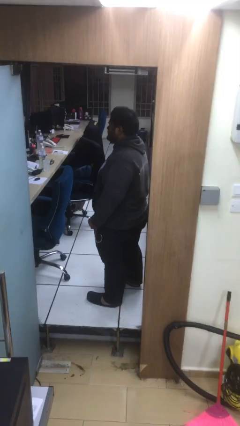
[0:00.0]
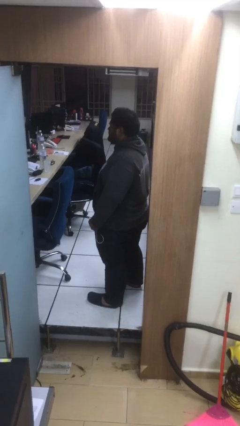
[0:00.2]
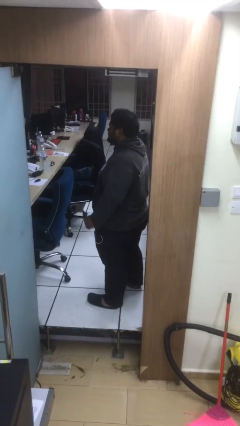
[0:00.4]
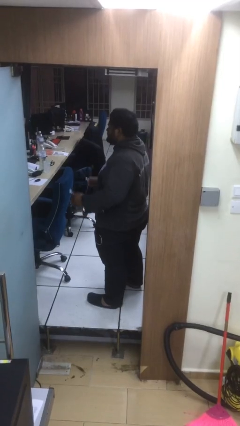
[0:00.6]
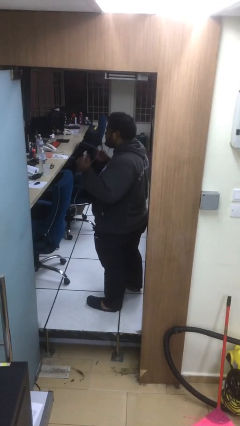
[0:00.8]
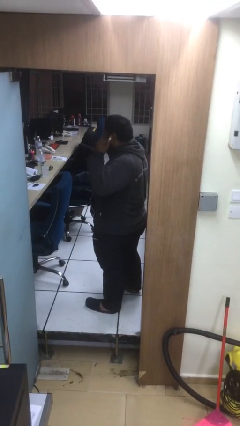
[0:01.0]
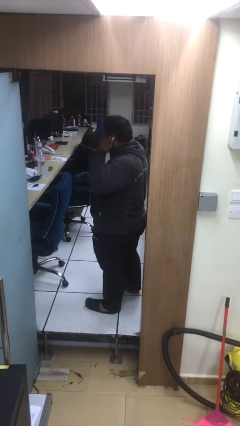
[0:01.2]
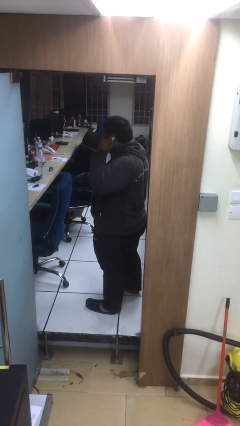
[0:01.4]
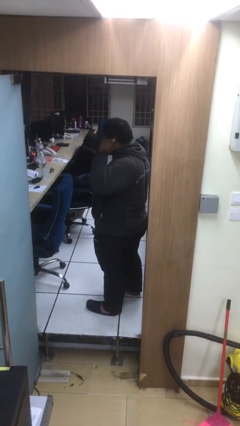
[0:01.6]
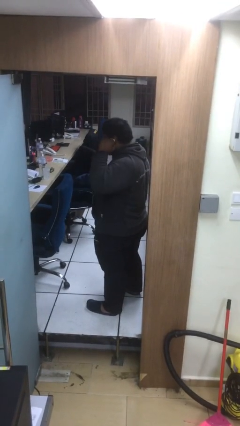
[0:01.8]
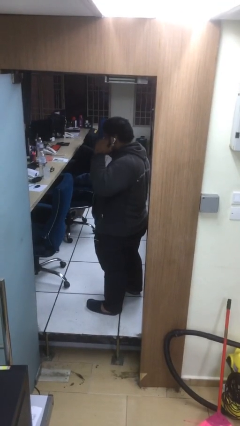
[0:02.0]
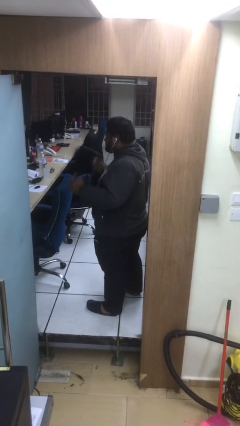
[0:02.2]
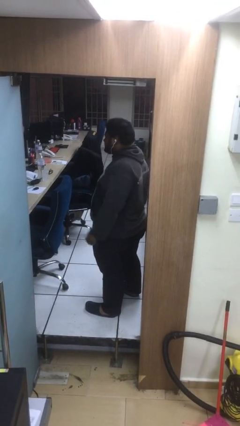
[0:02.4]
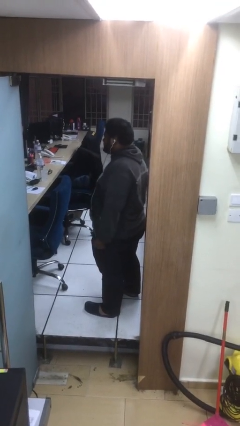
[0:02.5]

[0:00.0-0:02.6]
person puts on headphones

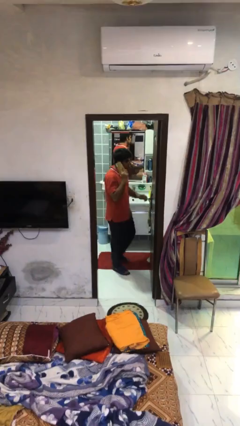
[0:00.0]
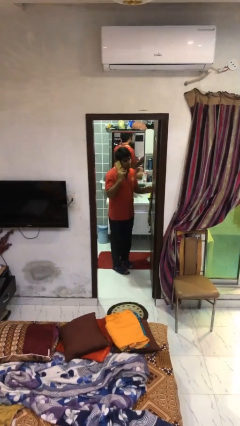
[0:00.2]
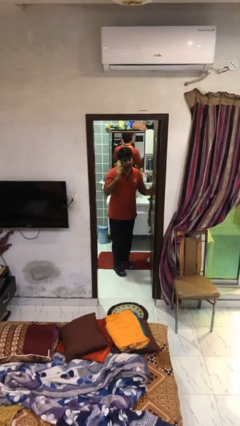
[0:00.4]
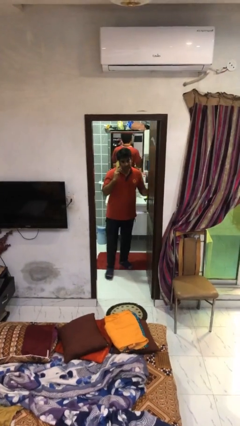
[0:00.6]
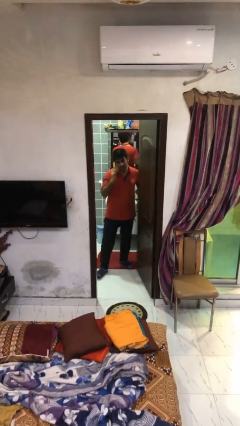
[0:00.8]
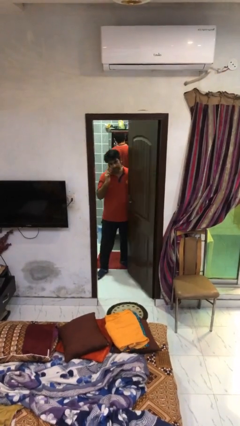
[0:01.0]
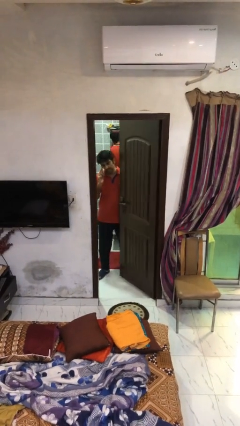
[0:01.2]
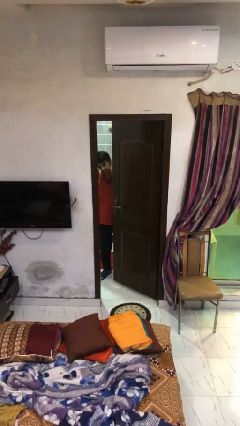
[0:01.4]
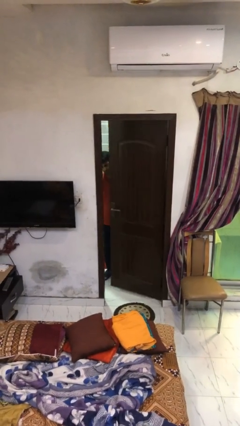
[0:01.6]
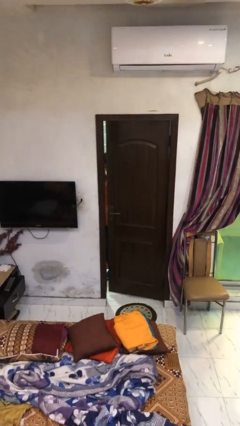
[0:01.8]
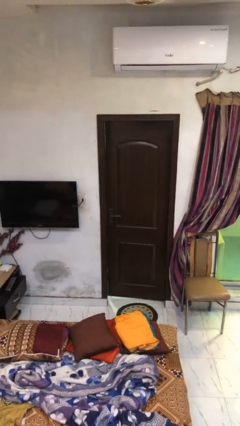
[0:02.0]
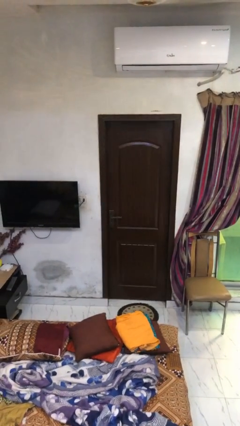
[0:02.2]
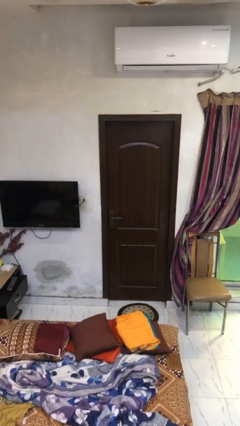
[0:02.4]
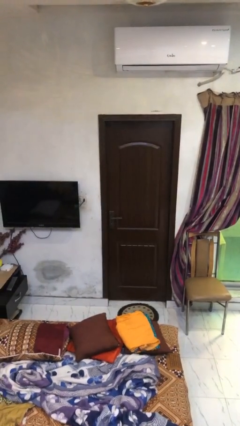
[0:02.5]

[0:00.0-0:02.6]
person closes facility door

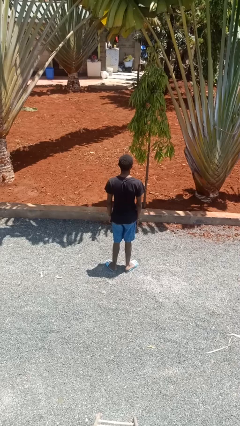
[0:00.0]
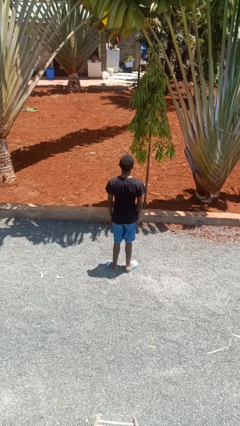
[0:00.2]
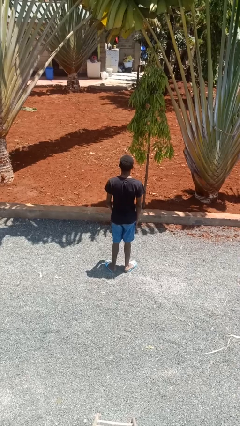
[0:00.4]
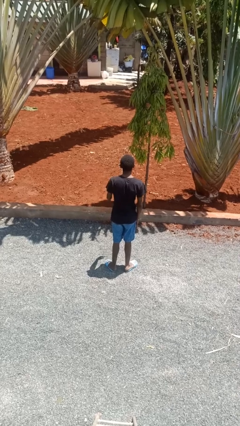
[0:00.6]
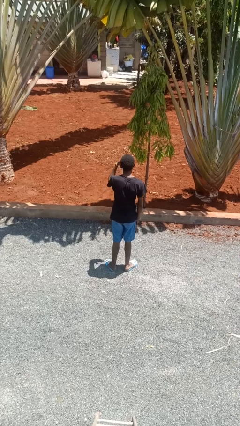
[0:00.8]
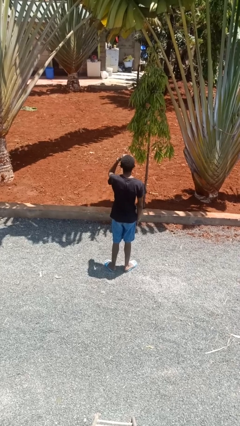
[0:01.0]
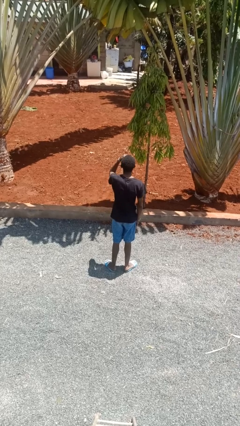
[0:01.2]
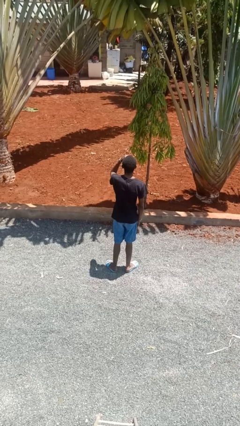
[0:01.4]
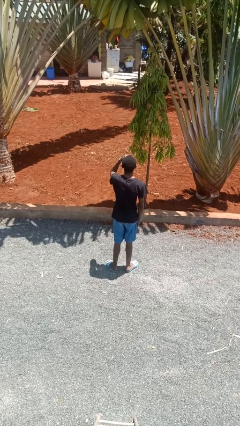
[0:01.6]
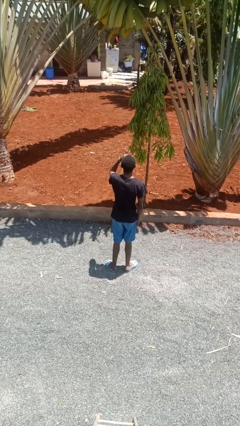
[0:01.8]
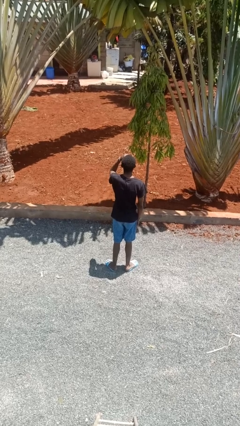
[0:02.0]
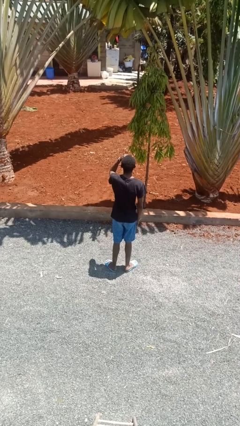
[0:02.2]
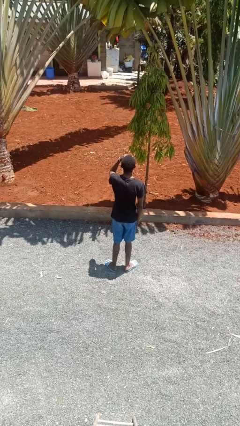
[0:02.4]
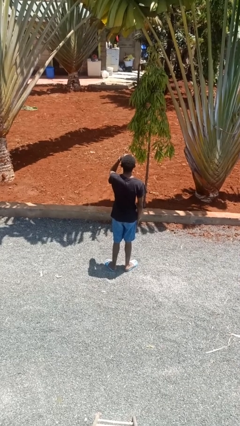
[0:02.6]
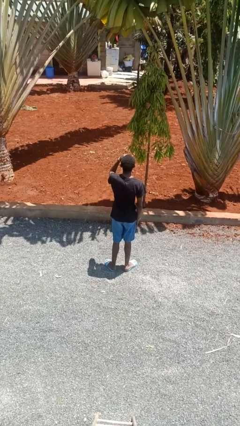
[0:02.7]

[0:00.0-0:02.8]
person shades eyes

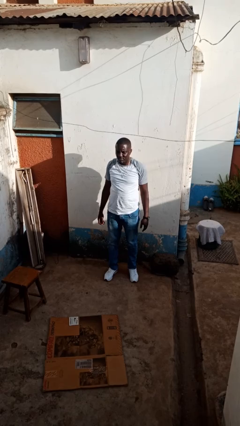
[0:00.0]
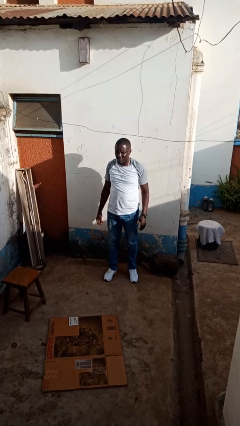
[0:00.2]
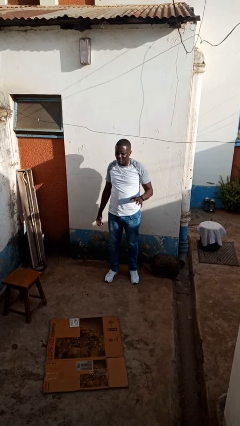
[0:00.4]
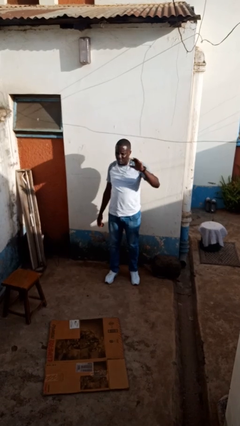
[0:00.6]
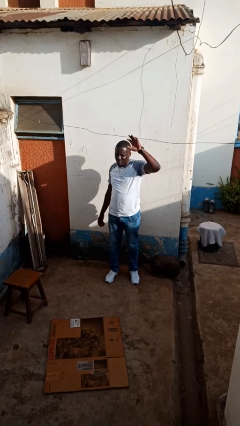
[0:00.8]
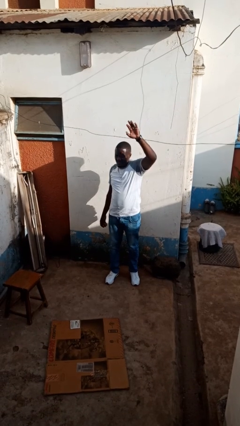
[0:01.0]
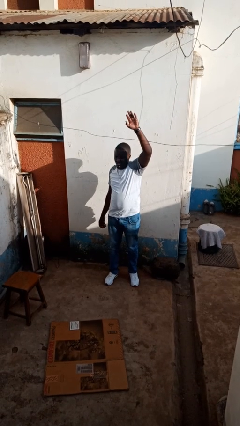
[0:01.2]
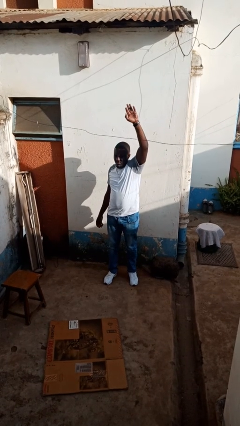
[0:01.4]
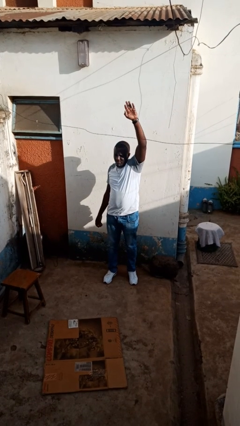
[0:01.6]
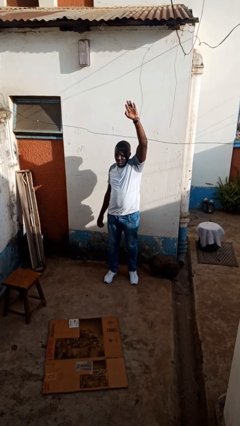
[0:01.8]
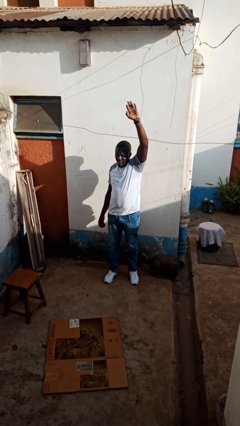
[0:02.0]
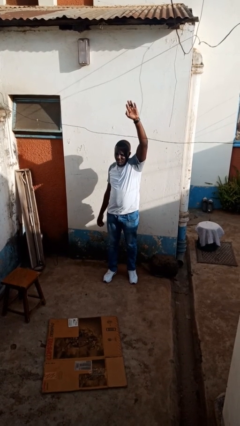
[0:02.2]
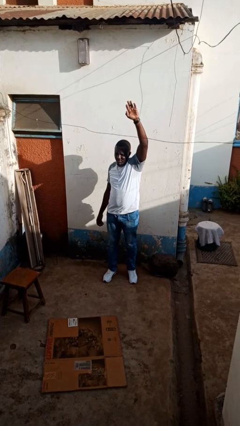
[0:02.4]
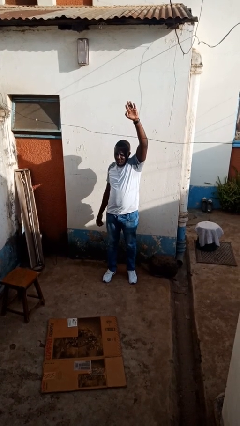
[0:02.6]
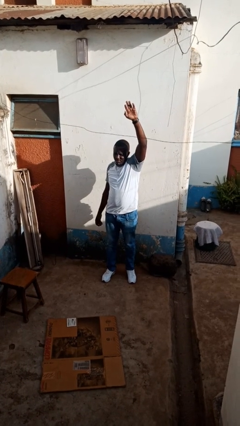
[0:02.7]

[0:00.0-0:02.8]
person gestures raise hand

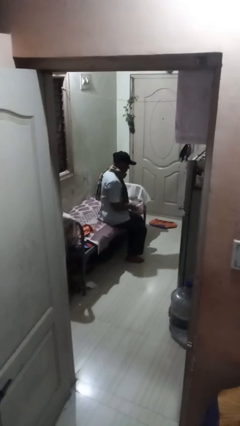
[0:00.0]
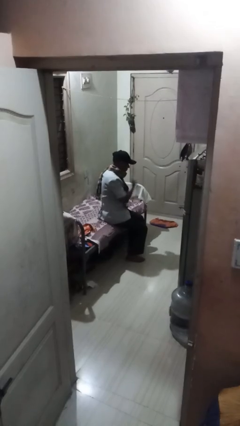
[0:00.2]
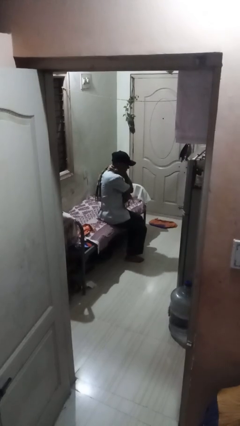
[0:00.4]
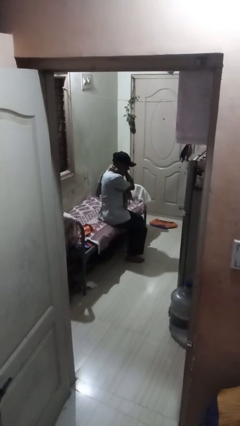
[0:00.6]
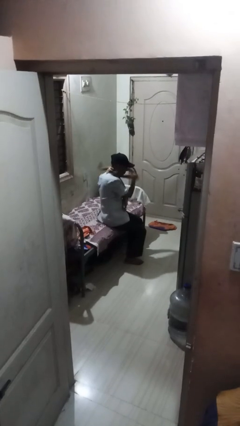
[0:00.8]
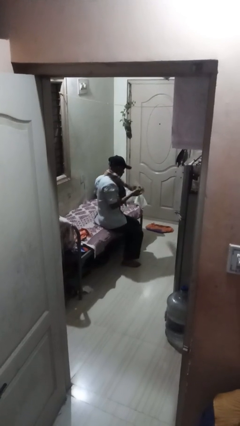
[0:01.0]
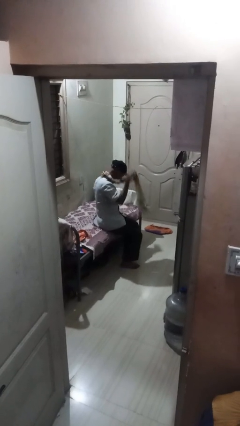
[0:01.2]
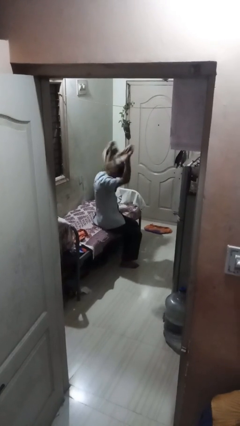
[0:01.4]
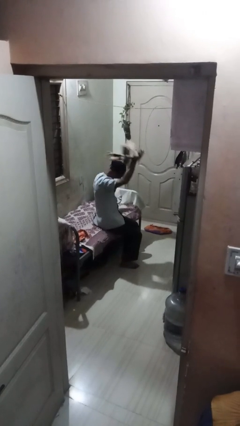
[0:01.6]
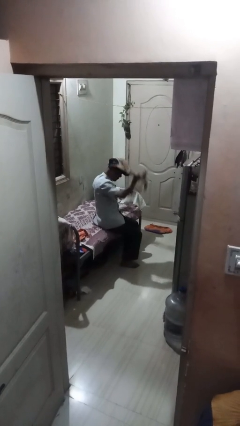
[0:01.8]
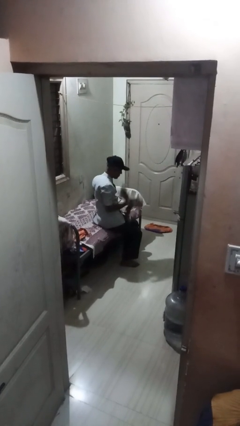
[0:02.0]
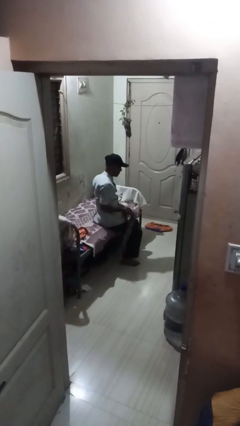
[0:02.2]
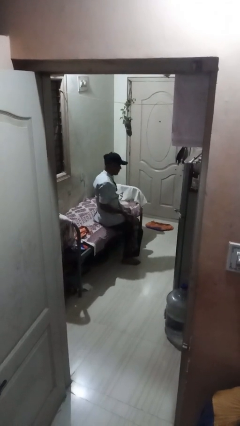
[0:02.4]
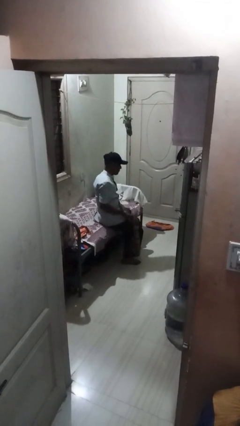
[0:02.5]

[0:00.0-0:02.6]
person takes off scarf

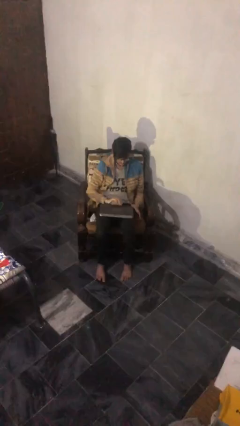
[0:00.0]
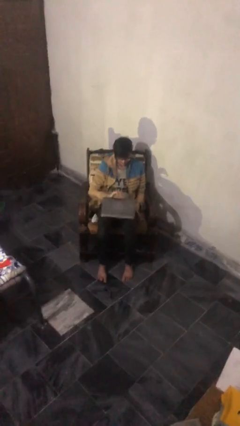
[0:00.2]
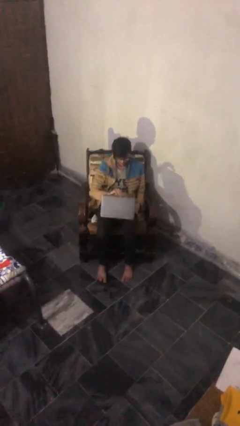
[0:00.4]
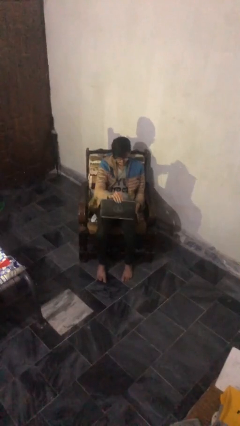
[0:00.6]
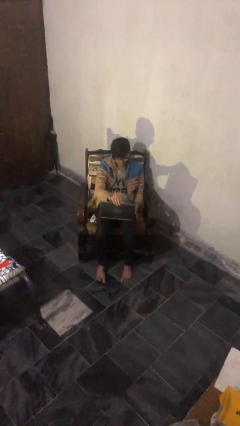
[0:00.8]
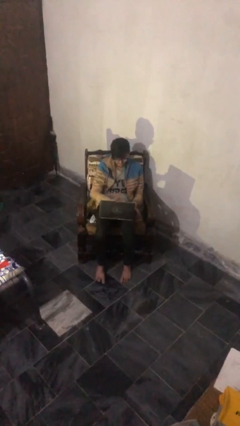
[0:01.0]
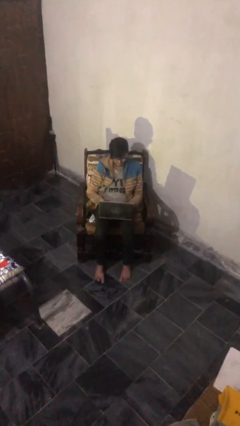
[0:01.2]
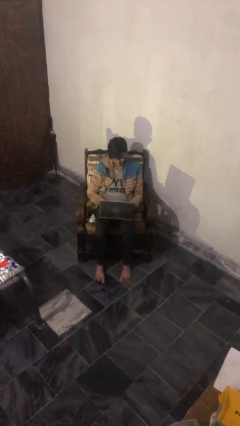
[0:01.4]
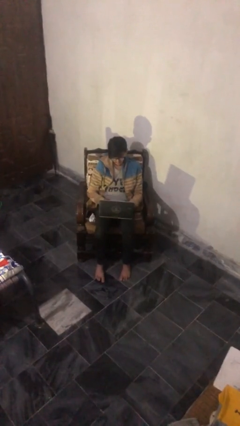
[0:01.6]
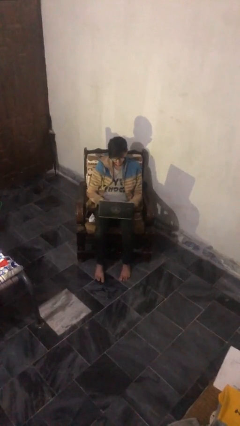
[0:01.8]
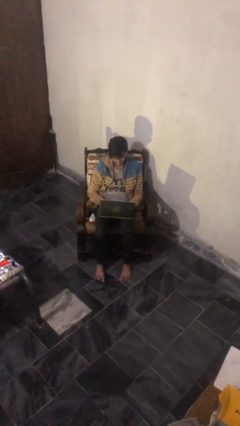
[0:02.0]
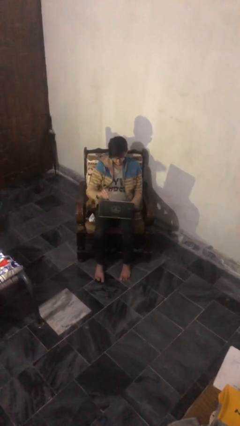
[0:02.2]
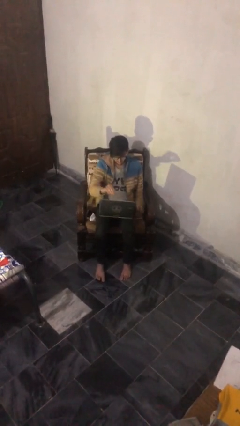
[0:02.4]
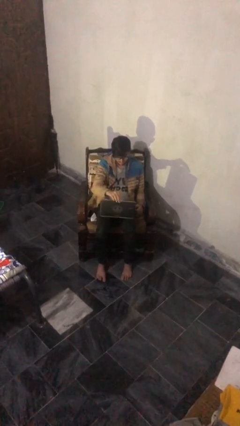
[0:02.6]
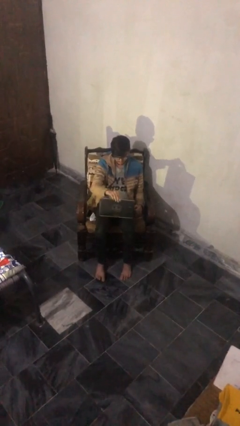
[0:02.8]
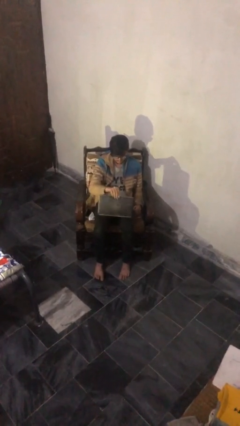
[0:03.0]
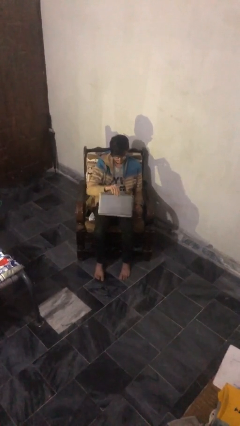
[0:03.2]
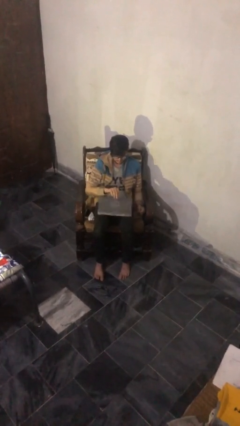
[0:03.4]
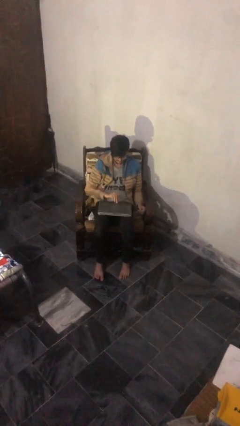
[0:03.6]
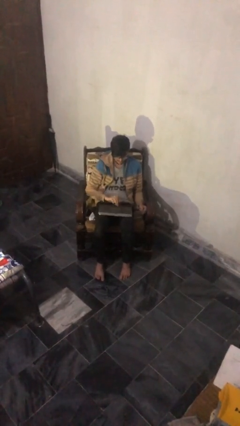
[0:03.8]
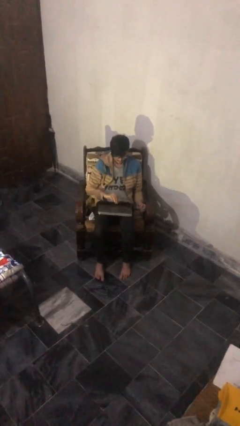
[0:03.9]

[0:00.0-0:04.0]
person interacts with laptop
